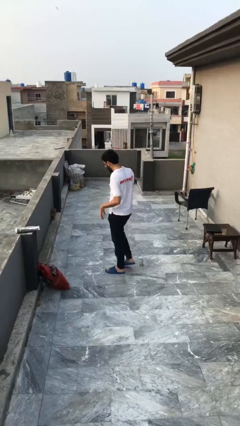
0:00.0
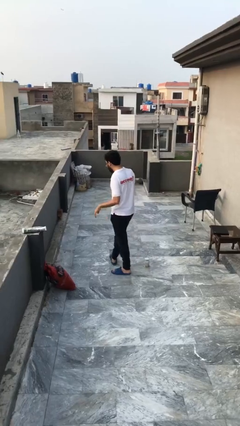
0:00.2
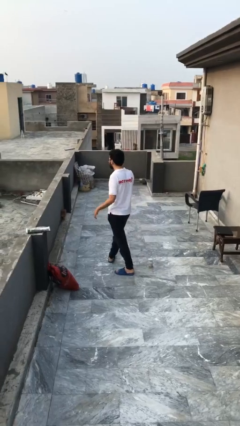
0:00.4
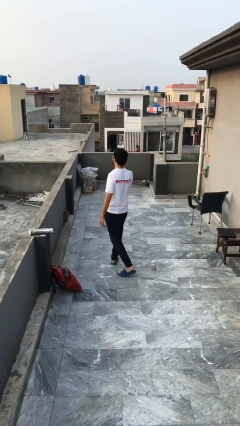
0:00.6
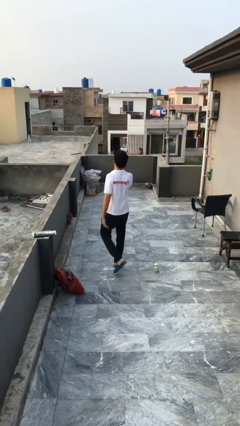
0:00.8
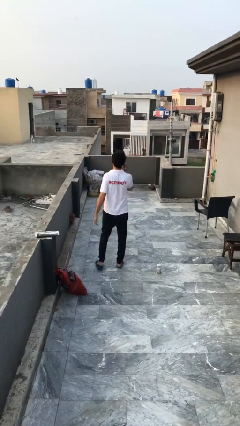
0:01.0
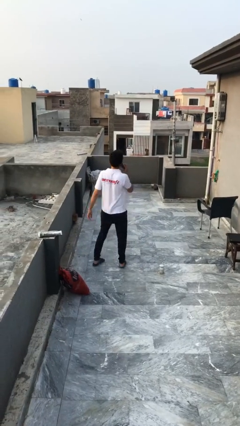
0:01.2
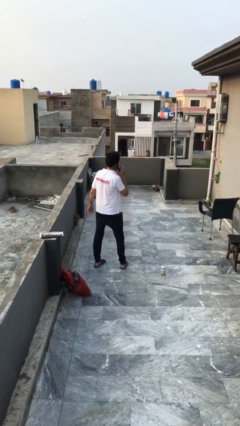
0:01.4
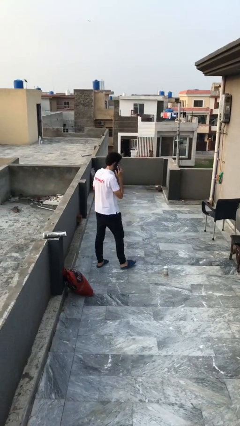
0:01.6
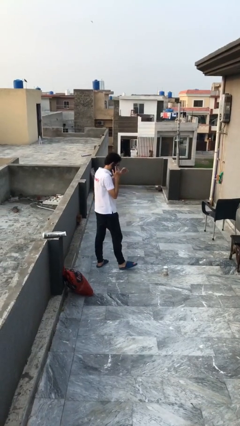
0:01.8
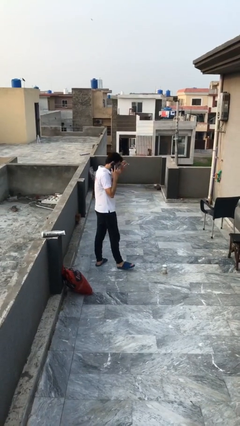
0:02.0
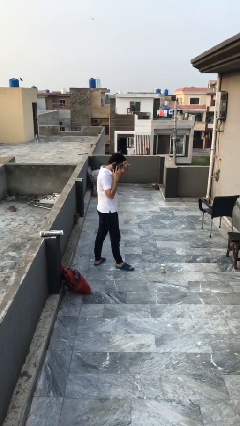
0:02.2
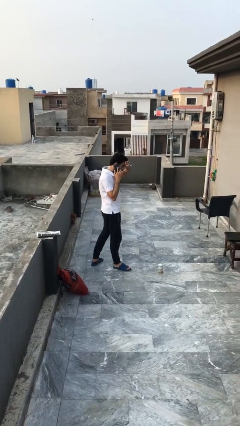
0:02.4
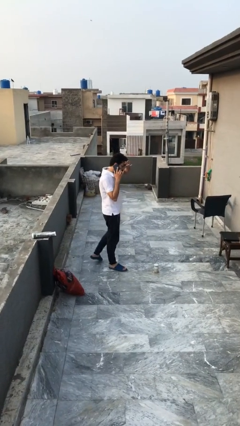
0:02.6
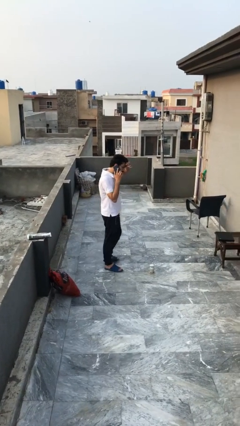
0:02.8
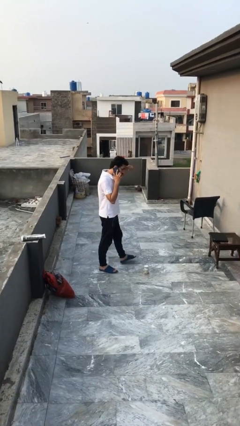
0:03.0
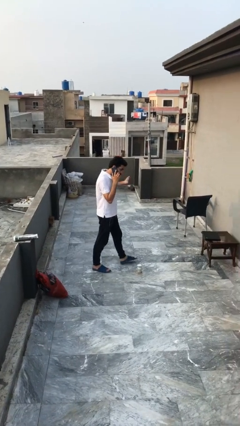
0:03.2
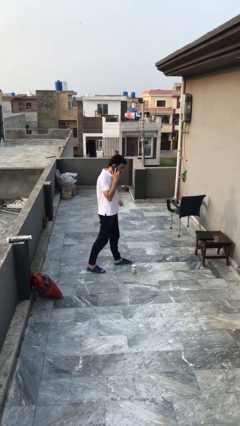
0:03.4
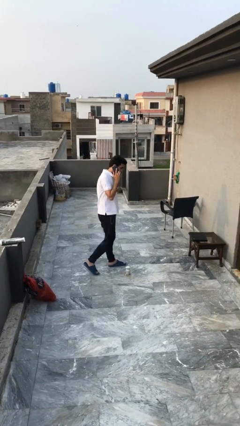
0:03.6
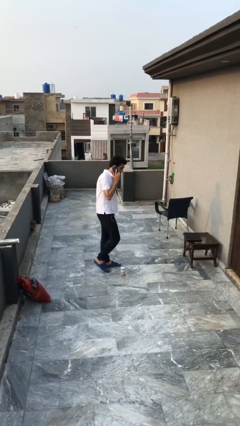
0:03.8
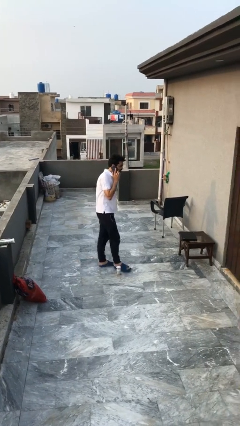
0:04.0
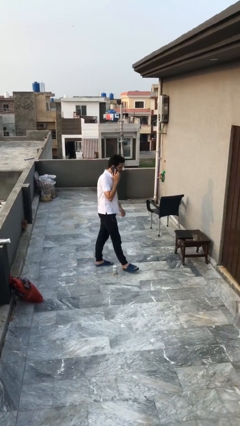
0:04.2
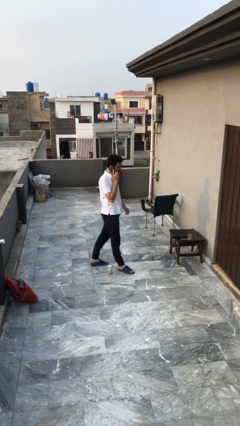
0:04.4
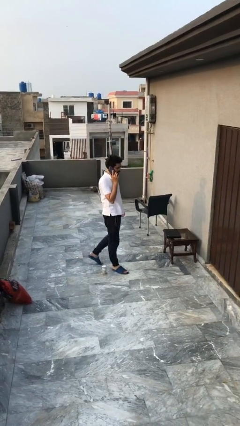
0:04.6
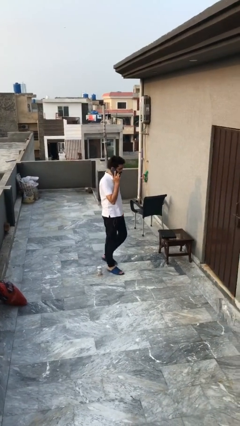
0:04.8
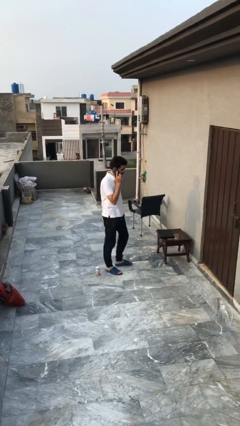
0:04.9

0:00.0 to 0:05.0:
person talks on phone

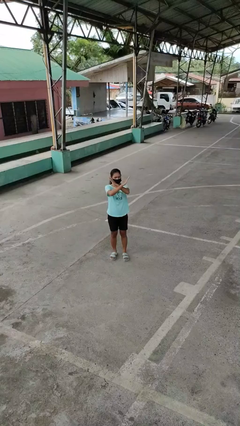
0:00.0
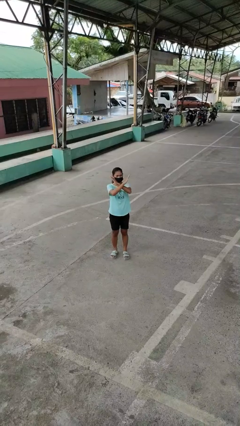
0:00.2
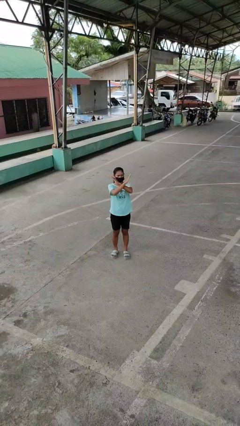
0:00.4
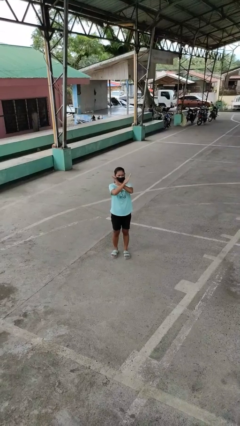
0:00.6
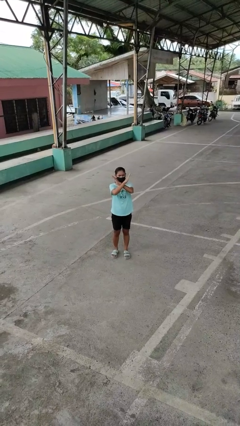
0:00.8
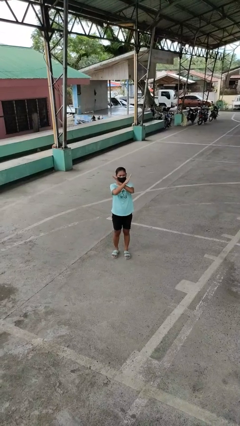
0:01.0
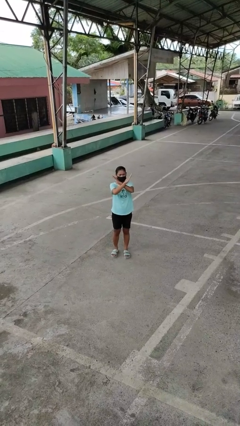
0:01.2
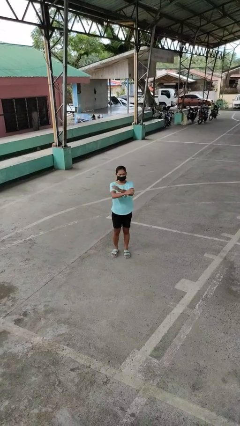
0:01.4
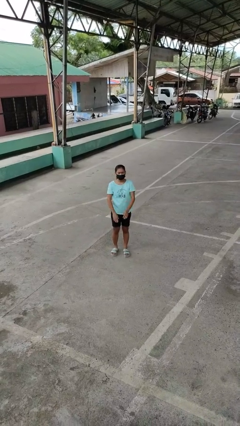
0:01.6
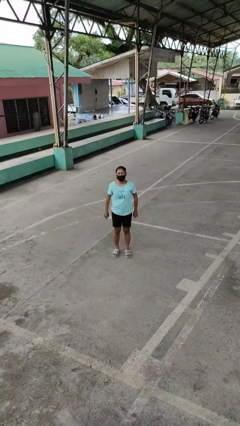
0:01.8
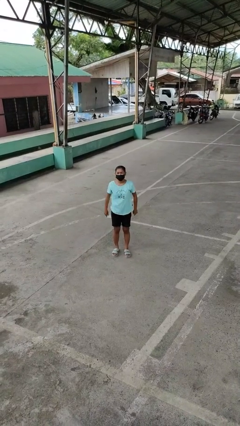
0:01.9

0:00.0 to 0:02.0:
person gestures arms x

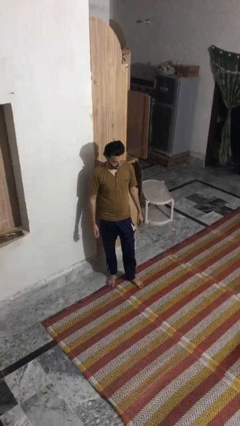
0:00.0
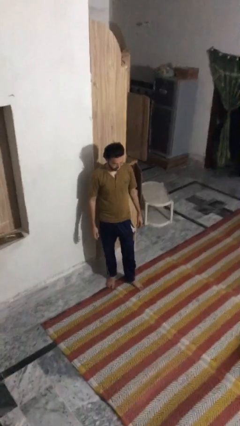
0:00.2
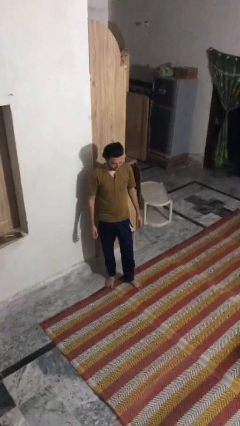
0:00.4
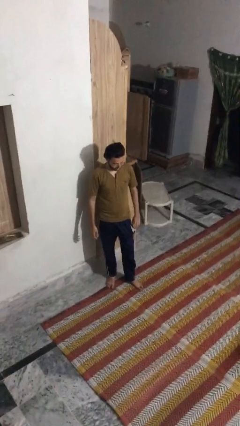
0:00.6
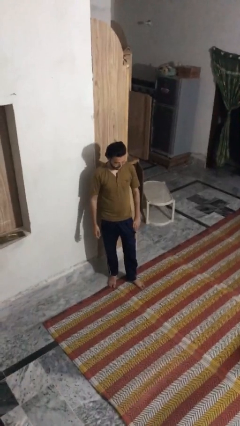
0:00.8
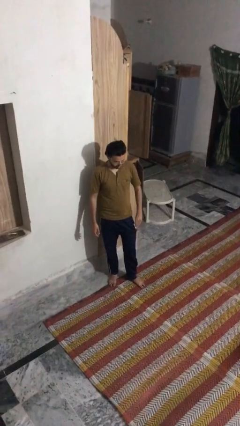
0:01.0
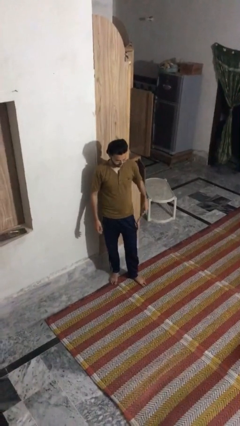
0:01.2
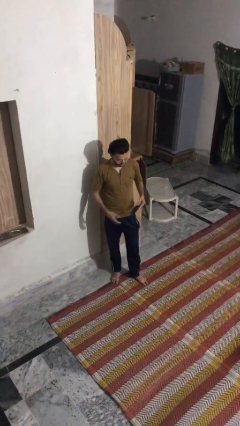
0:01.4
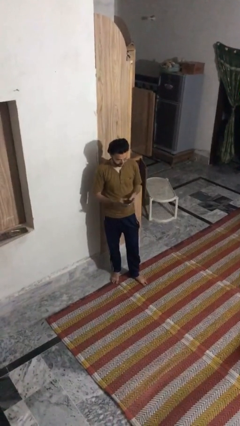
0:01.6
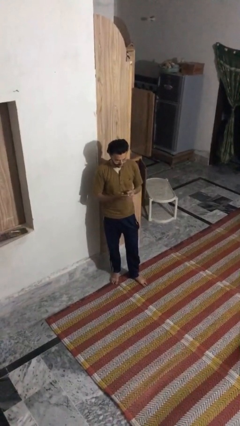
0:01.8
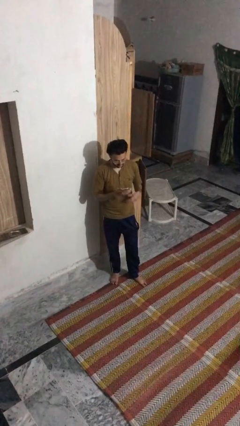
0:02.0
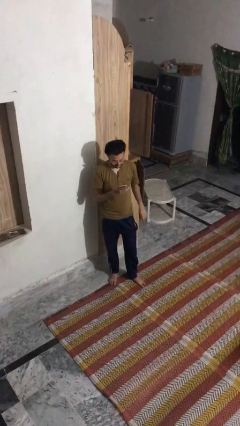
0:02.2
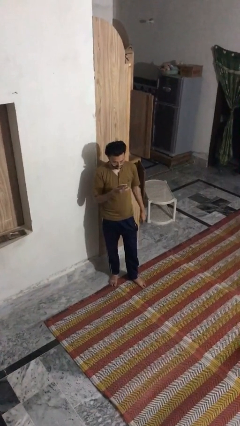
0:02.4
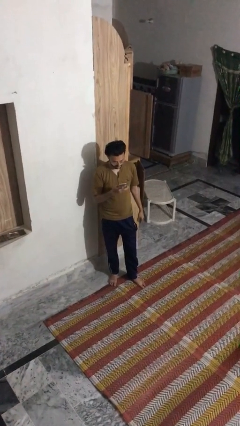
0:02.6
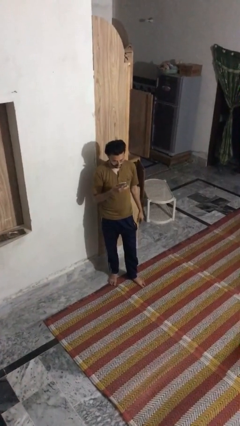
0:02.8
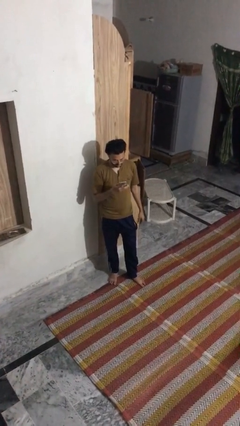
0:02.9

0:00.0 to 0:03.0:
person takes phone from pocket

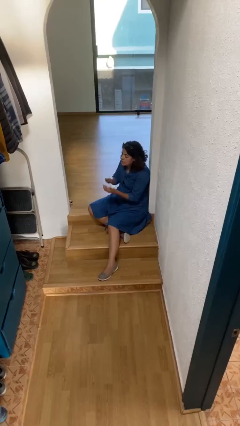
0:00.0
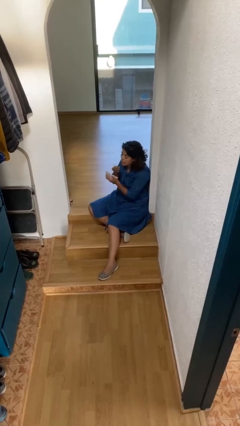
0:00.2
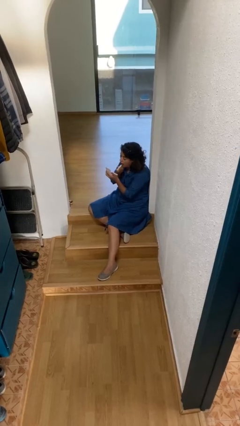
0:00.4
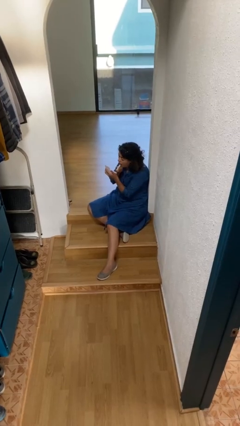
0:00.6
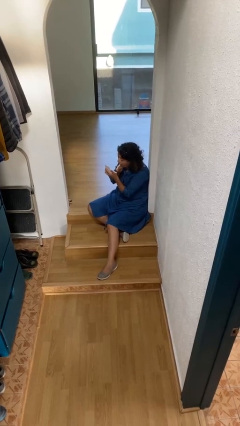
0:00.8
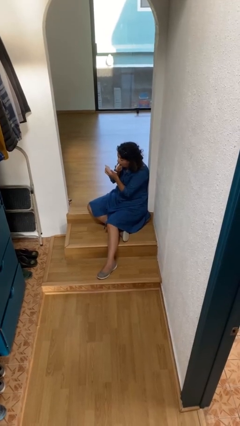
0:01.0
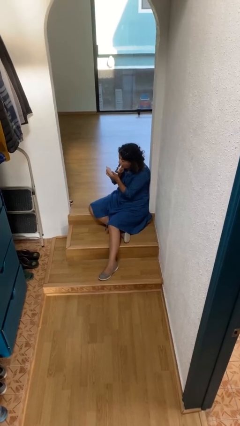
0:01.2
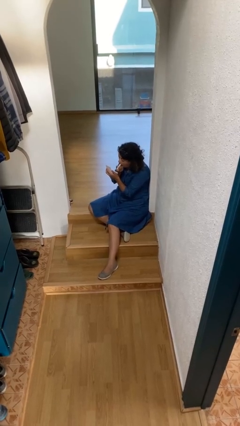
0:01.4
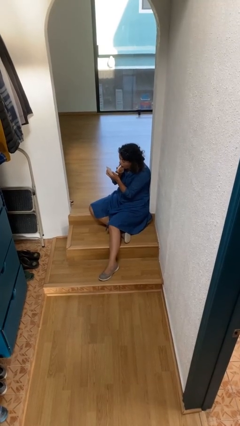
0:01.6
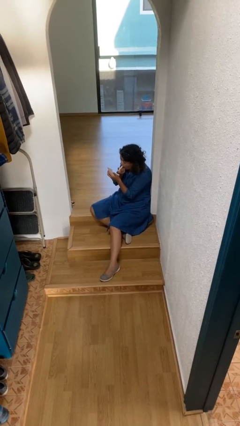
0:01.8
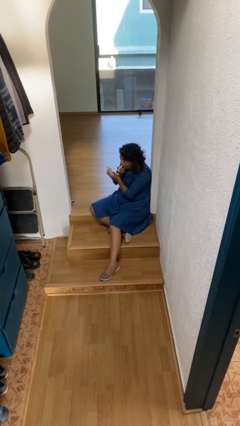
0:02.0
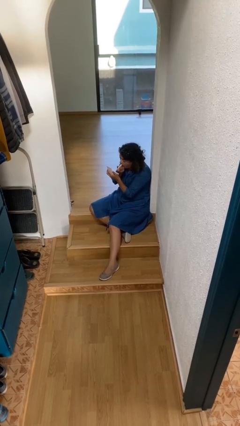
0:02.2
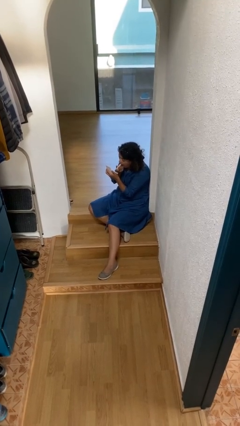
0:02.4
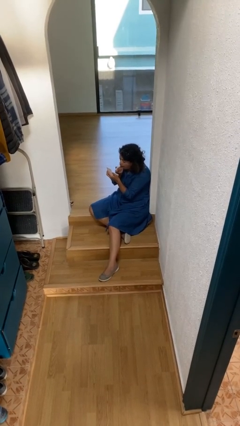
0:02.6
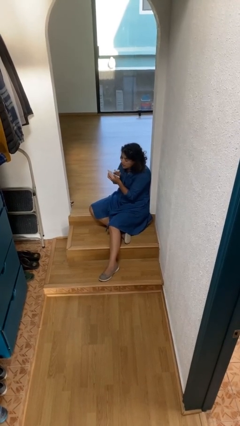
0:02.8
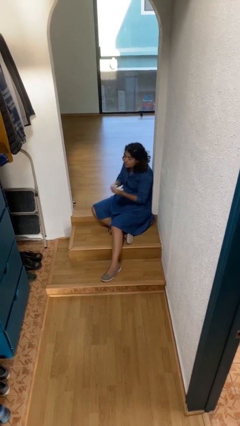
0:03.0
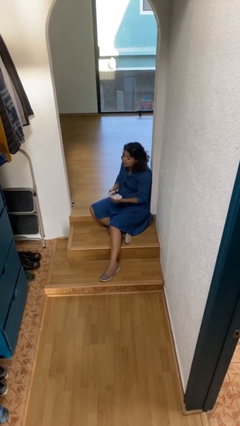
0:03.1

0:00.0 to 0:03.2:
person applies lip makeup

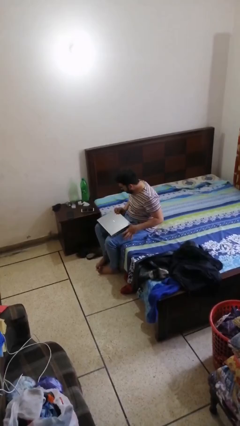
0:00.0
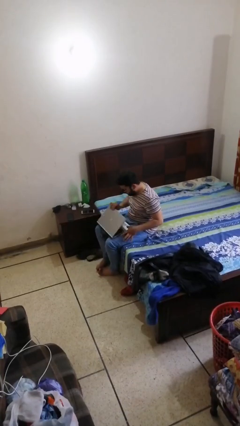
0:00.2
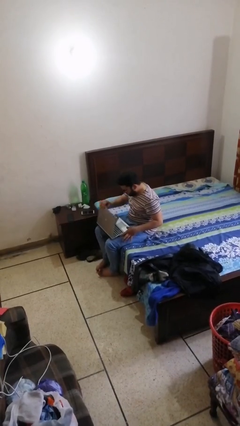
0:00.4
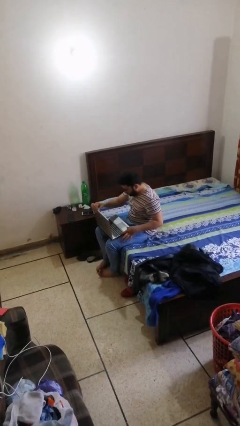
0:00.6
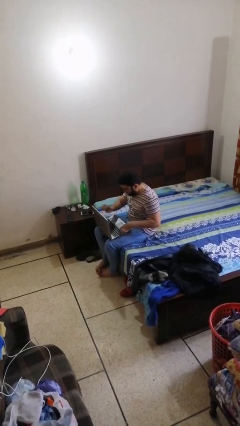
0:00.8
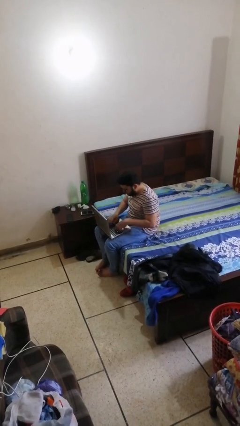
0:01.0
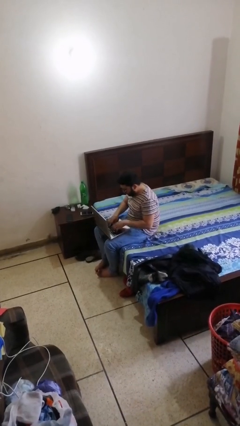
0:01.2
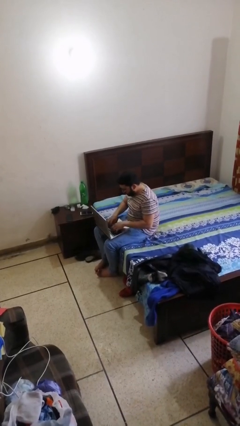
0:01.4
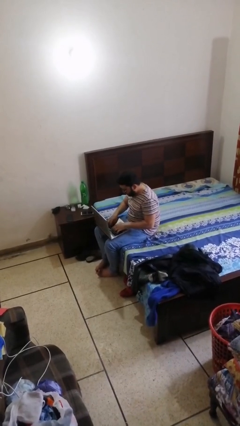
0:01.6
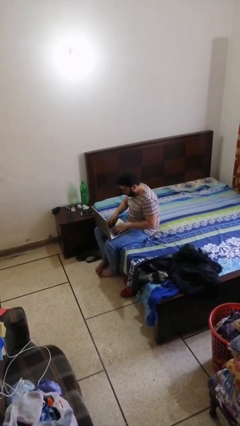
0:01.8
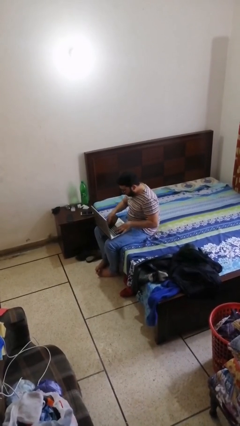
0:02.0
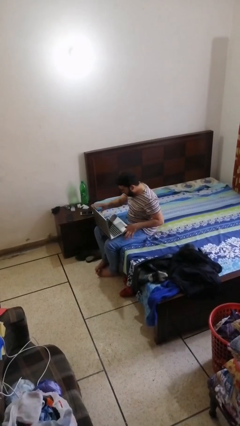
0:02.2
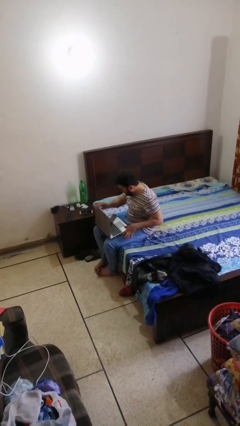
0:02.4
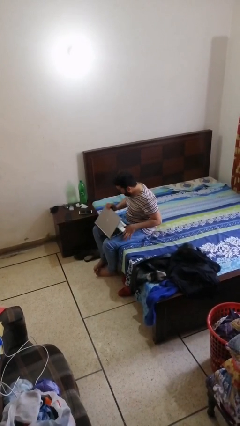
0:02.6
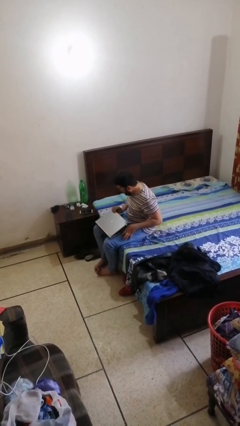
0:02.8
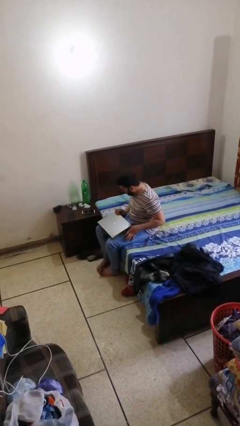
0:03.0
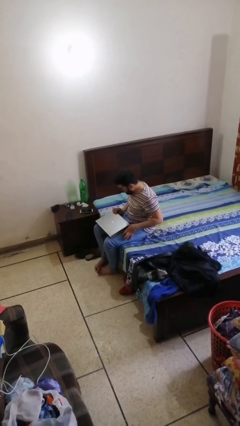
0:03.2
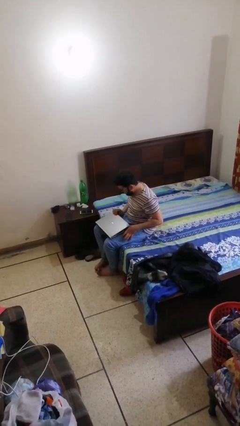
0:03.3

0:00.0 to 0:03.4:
person interacts with laptop

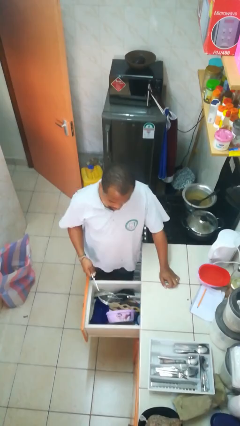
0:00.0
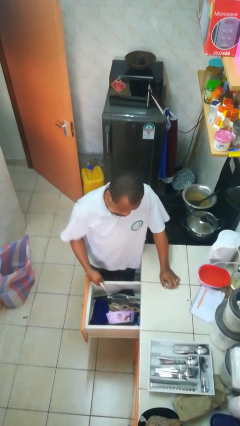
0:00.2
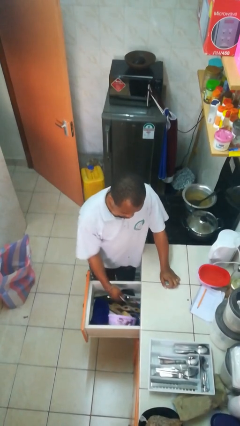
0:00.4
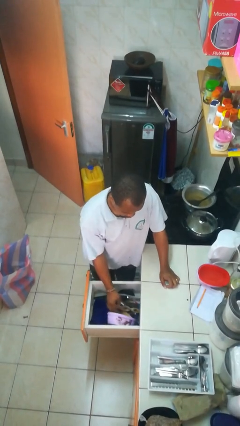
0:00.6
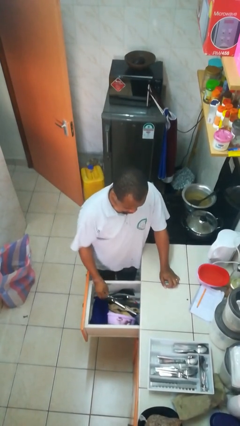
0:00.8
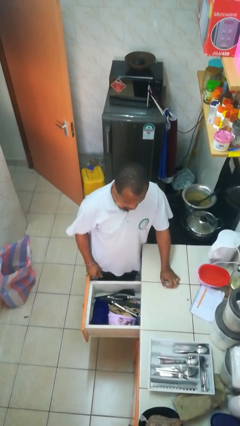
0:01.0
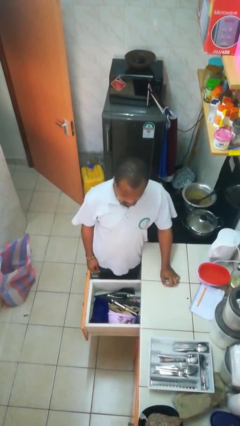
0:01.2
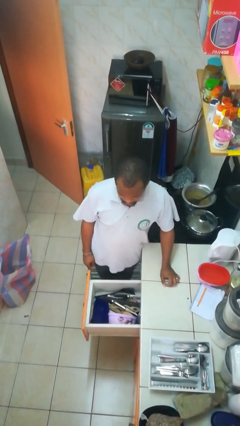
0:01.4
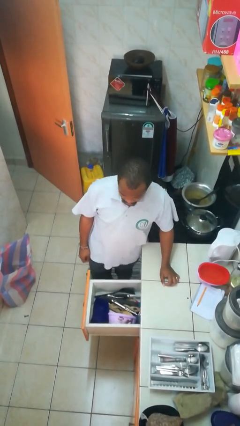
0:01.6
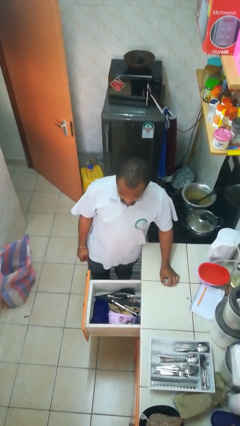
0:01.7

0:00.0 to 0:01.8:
person puts object into kitchen drawer
